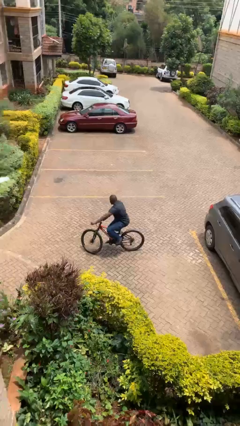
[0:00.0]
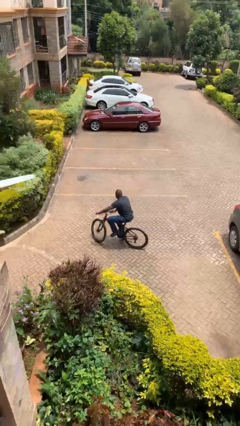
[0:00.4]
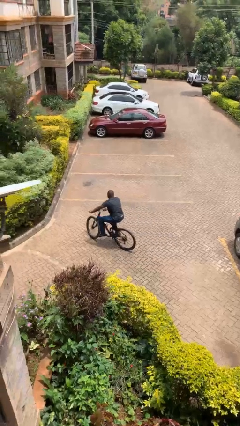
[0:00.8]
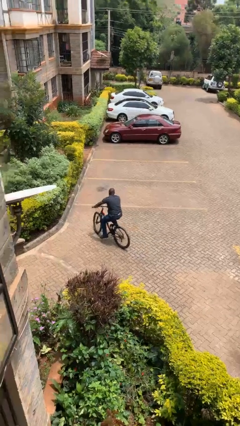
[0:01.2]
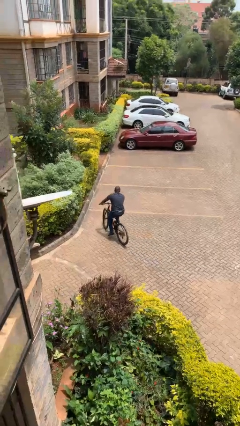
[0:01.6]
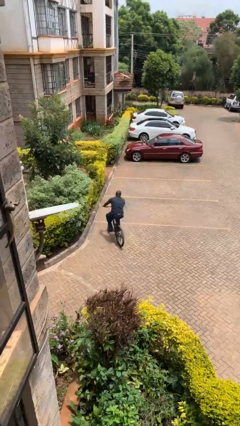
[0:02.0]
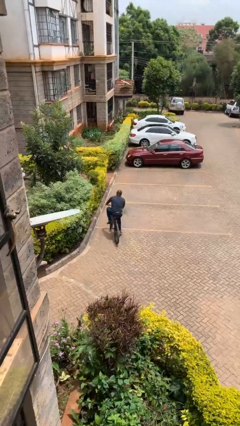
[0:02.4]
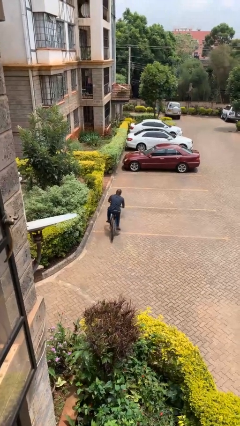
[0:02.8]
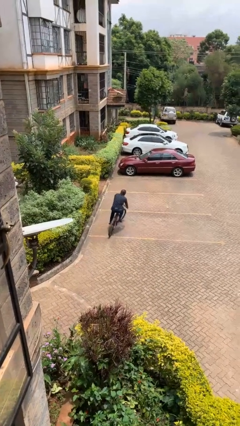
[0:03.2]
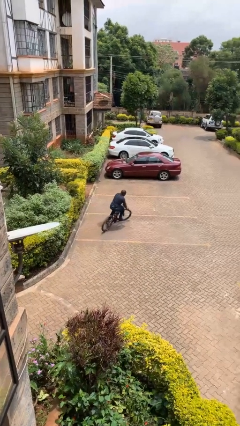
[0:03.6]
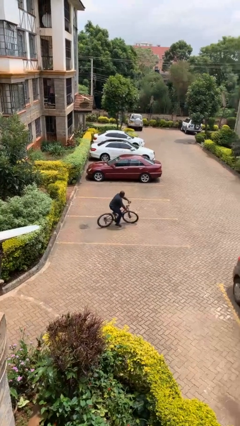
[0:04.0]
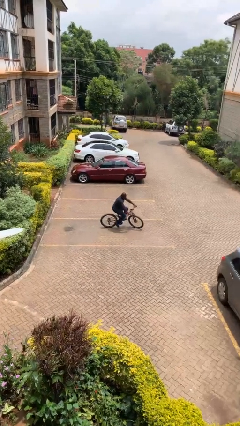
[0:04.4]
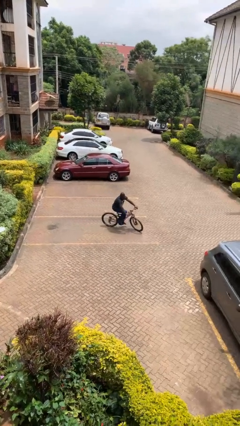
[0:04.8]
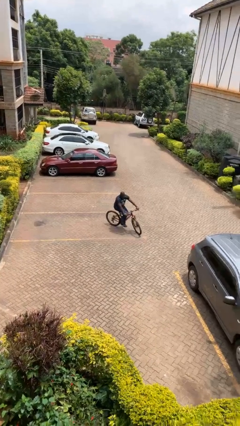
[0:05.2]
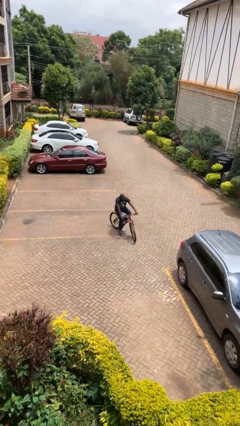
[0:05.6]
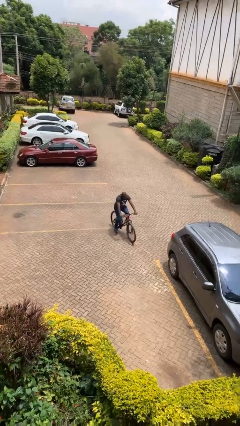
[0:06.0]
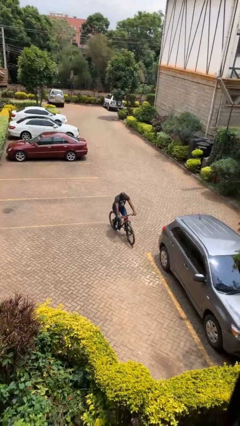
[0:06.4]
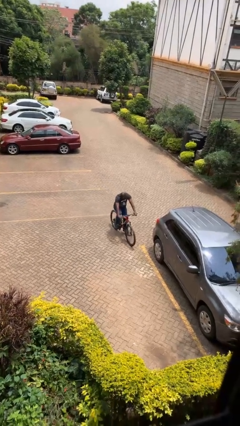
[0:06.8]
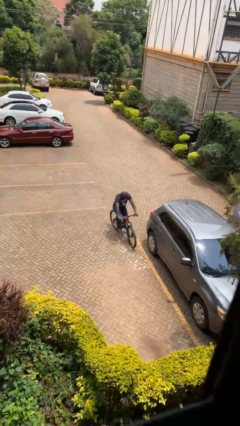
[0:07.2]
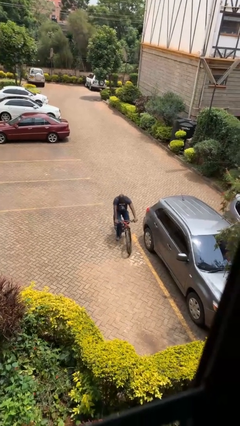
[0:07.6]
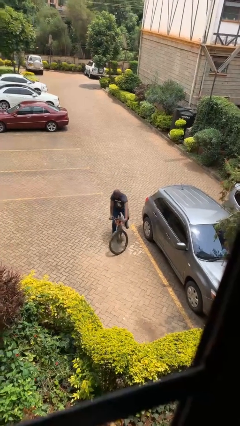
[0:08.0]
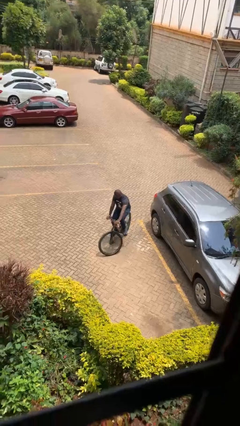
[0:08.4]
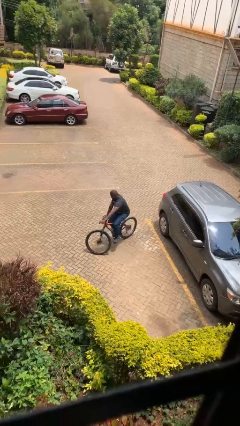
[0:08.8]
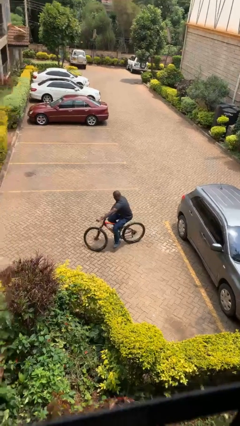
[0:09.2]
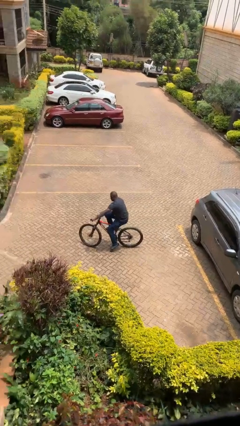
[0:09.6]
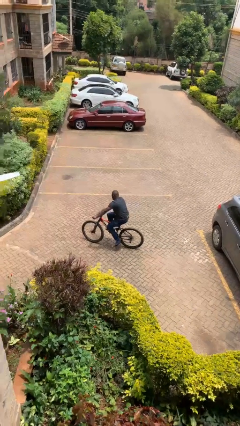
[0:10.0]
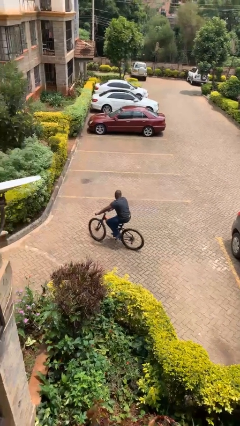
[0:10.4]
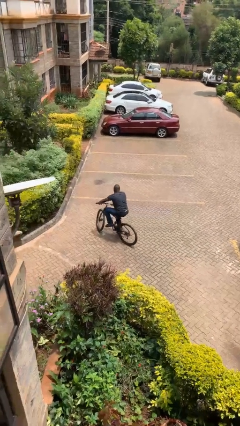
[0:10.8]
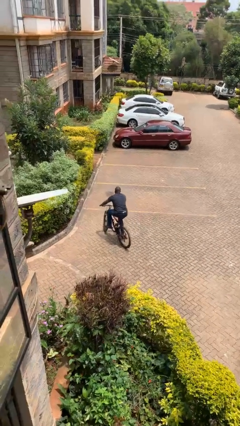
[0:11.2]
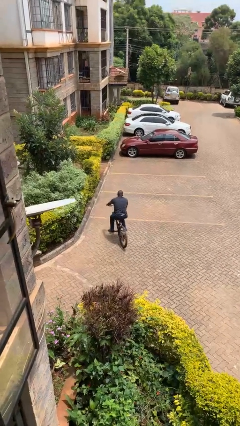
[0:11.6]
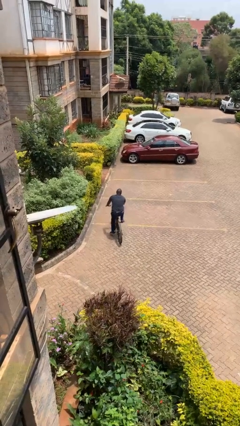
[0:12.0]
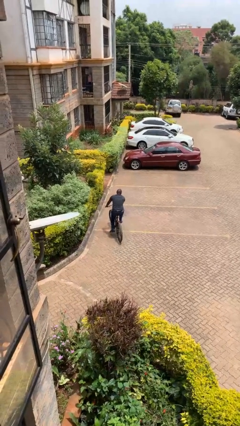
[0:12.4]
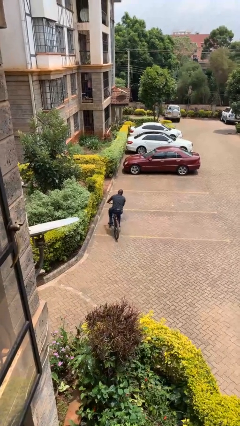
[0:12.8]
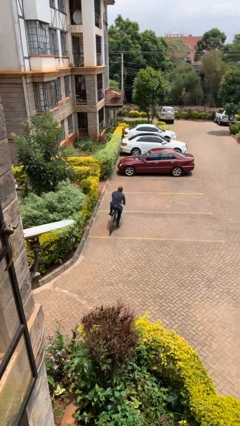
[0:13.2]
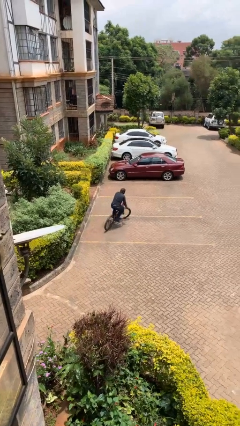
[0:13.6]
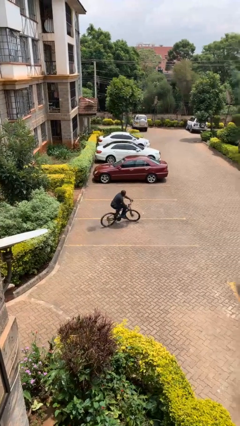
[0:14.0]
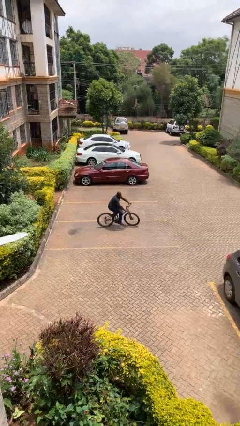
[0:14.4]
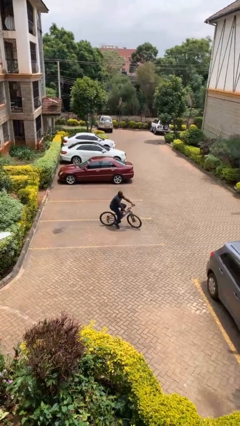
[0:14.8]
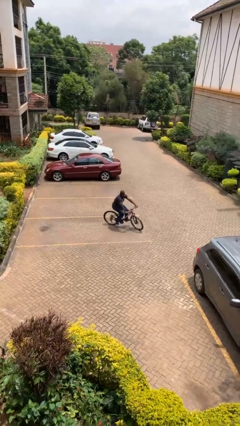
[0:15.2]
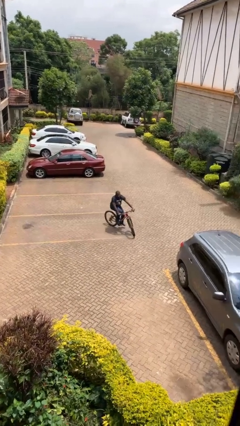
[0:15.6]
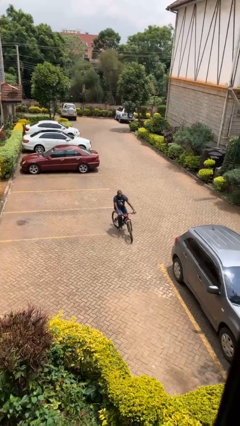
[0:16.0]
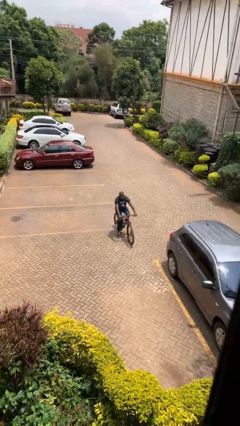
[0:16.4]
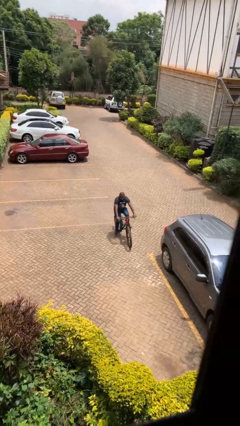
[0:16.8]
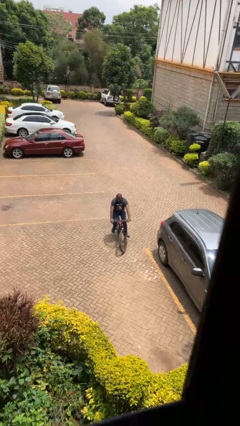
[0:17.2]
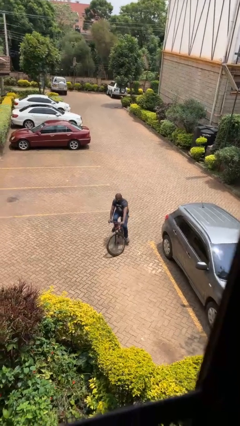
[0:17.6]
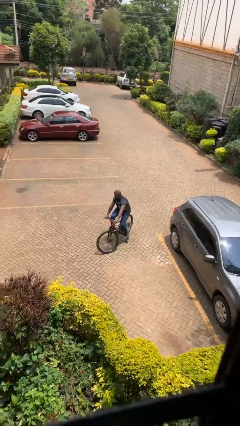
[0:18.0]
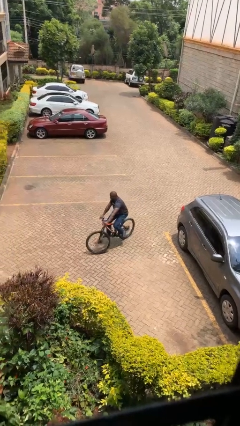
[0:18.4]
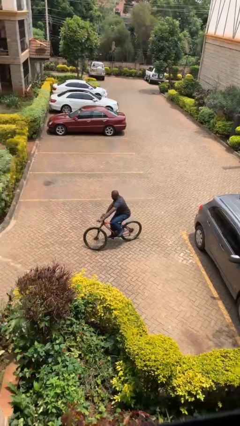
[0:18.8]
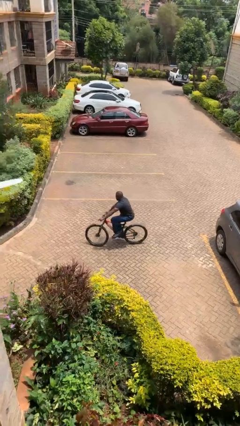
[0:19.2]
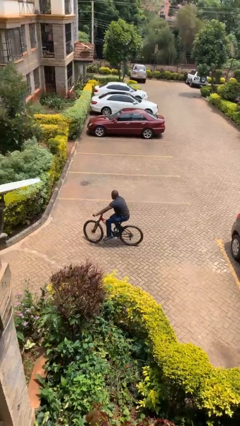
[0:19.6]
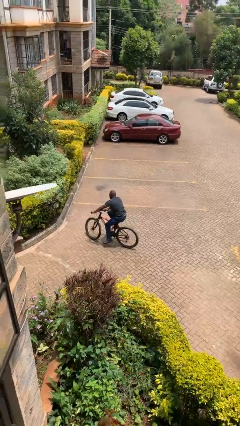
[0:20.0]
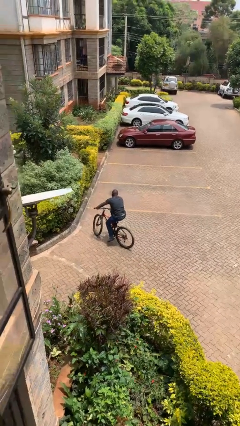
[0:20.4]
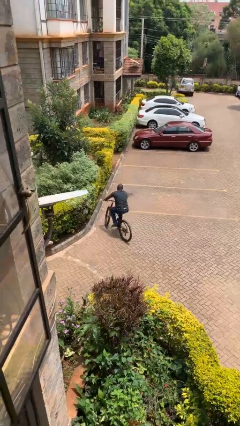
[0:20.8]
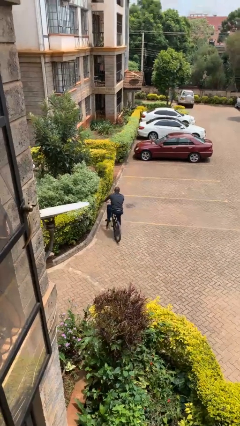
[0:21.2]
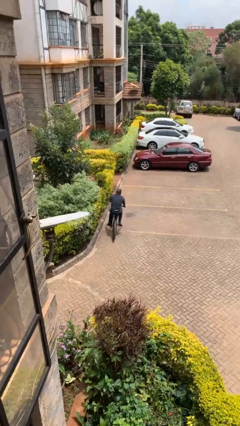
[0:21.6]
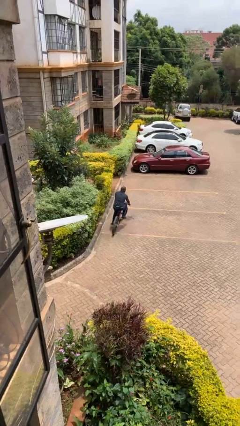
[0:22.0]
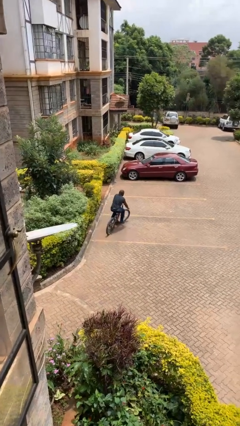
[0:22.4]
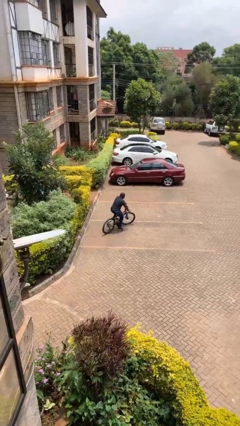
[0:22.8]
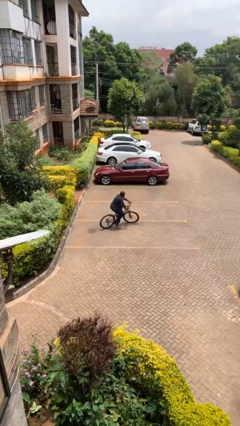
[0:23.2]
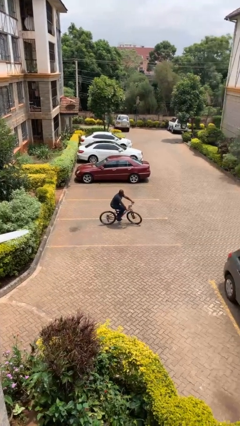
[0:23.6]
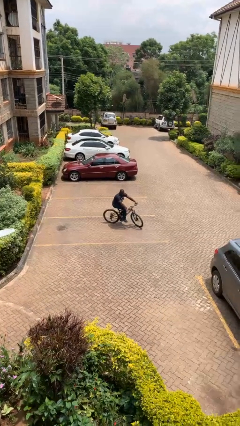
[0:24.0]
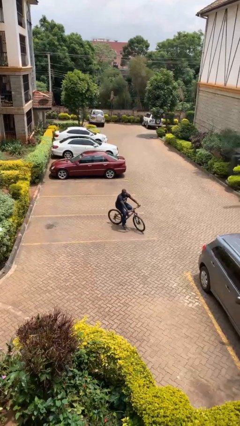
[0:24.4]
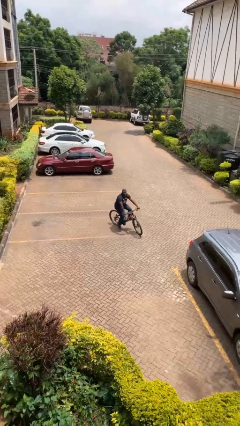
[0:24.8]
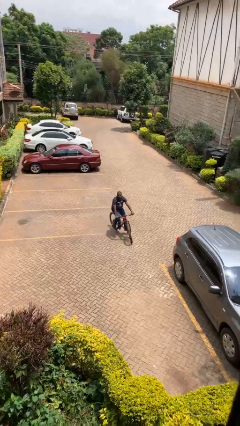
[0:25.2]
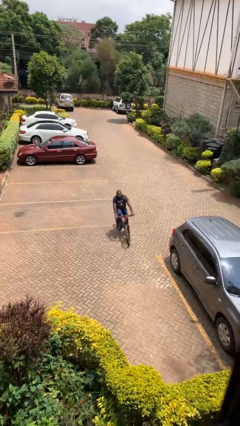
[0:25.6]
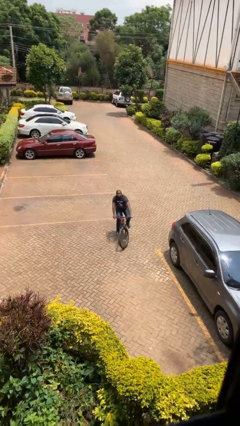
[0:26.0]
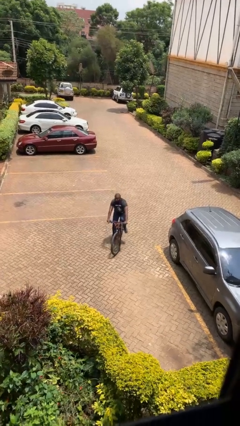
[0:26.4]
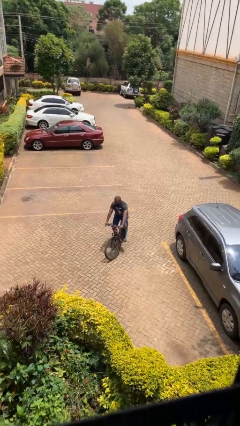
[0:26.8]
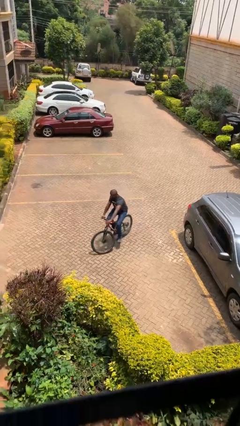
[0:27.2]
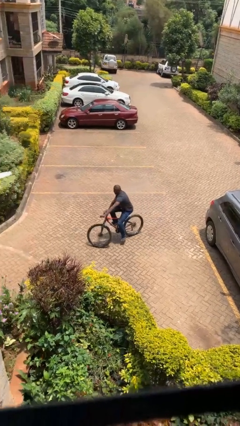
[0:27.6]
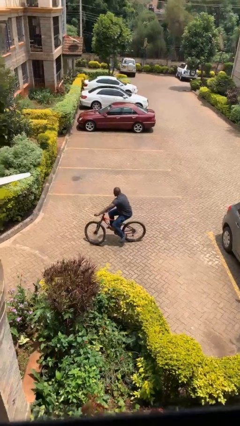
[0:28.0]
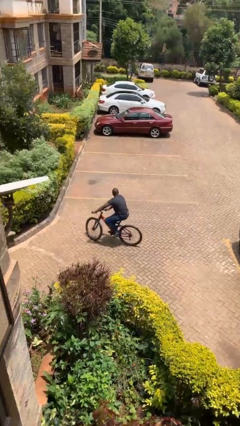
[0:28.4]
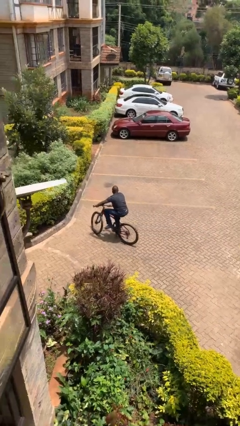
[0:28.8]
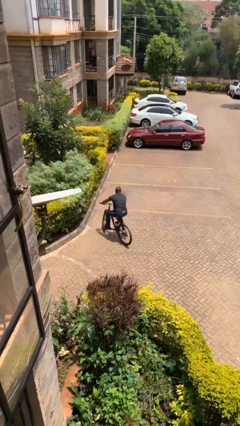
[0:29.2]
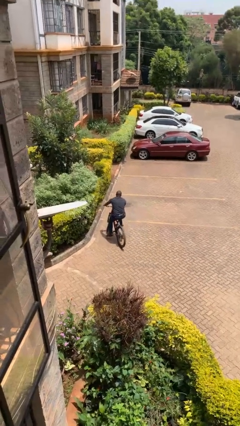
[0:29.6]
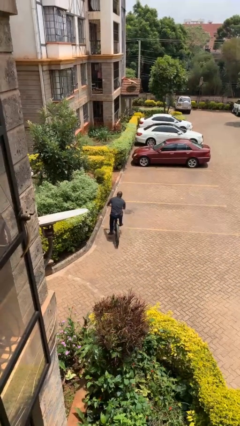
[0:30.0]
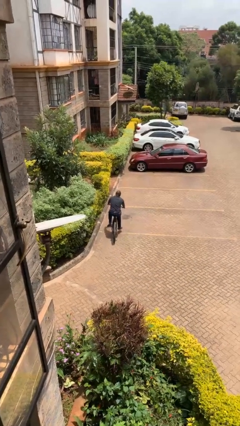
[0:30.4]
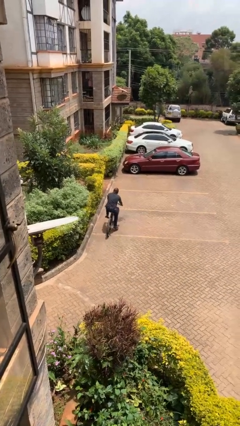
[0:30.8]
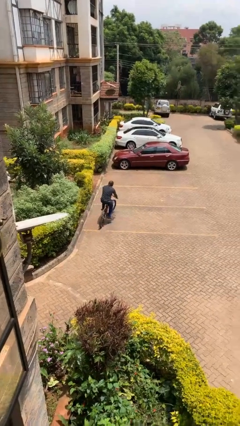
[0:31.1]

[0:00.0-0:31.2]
person rides bicycle

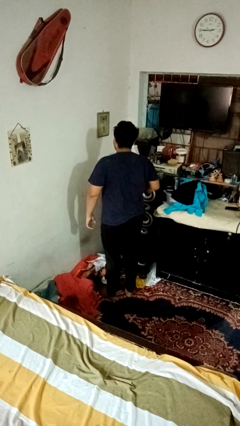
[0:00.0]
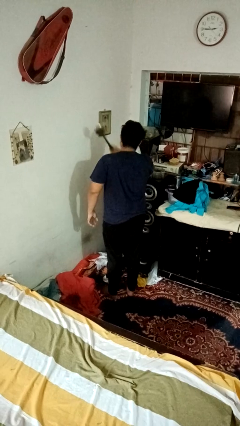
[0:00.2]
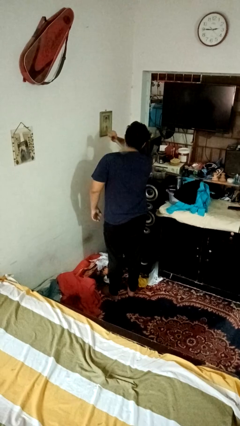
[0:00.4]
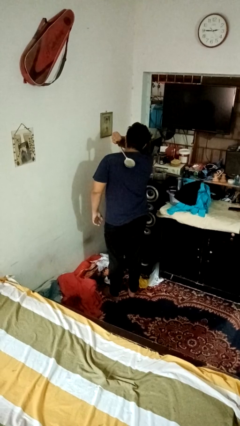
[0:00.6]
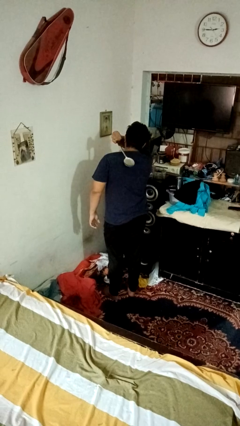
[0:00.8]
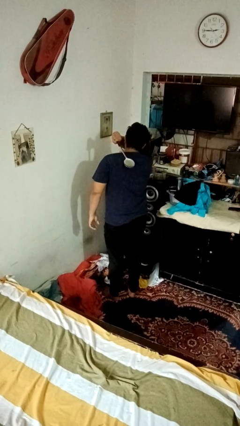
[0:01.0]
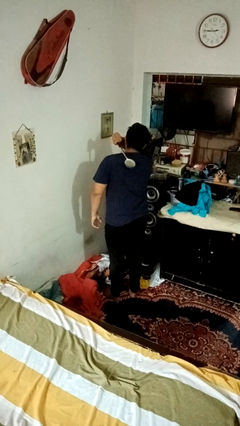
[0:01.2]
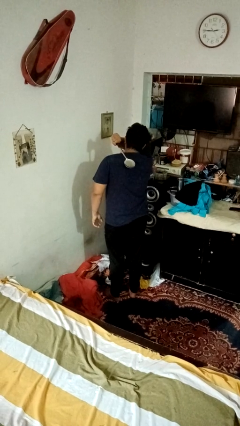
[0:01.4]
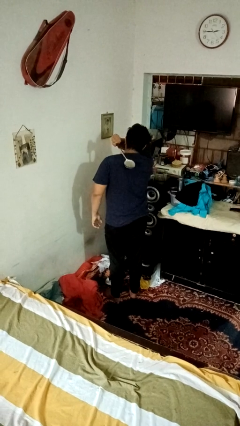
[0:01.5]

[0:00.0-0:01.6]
person swats bug

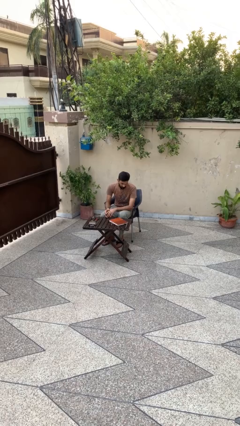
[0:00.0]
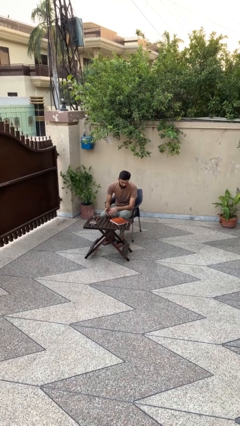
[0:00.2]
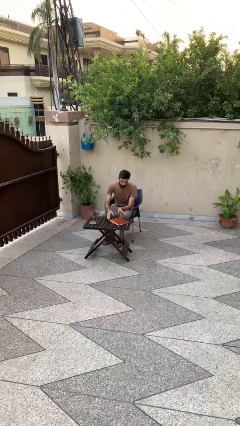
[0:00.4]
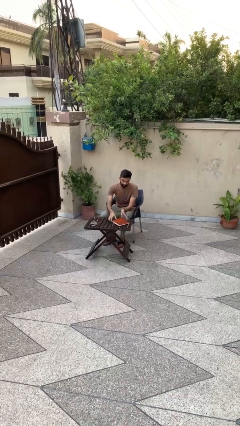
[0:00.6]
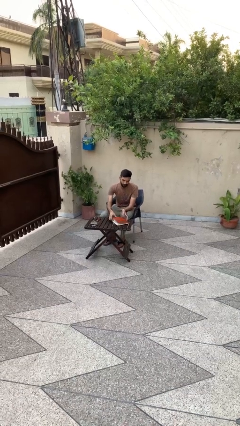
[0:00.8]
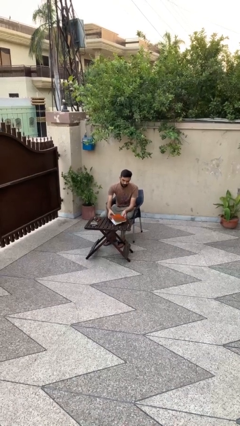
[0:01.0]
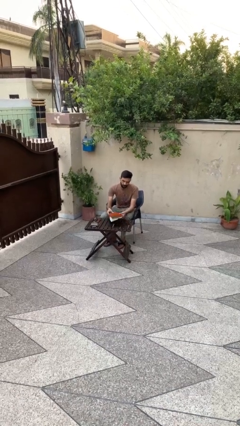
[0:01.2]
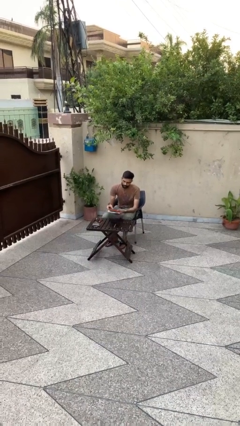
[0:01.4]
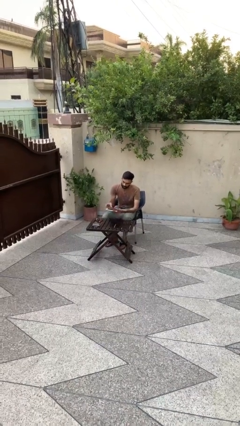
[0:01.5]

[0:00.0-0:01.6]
person picks up object from table
